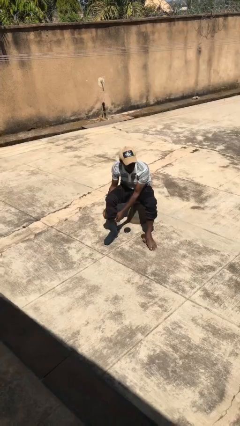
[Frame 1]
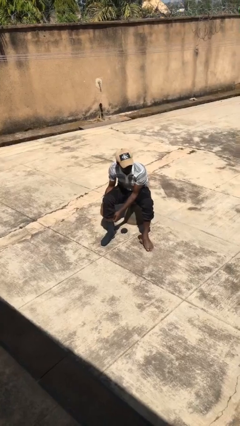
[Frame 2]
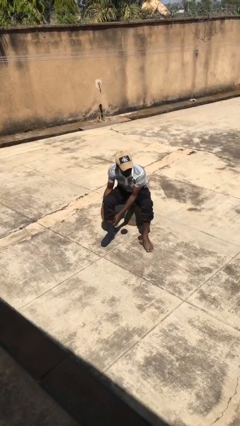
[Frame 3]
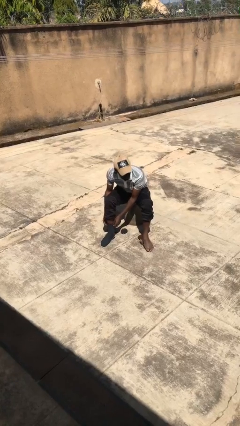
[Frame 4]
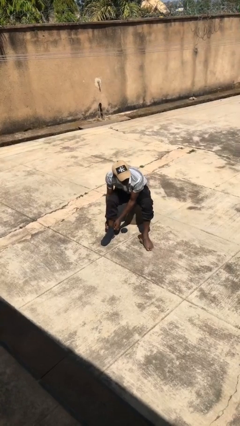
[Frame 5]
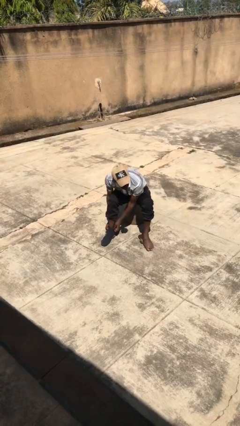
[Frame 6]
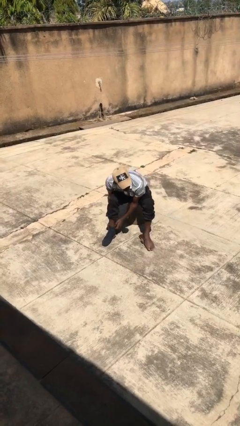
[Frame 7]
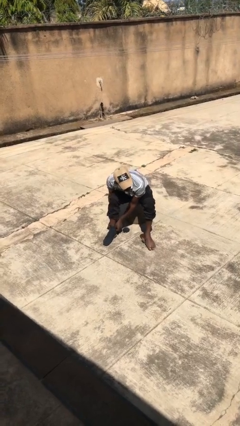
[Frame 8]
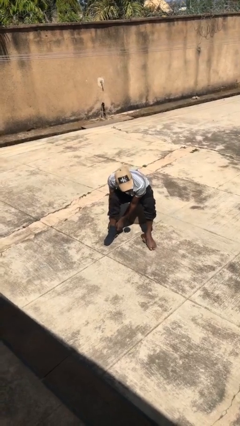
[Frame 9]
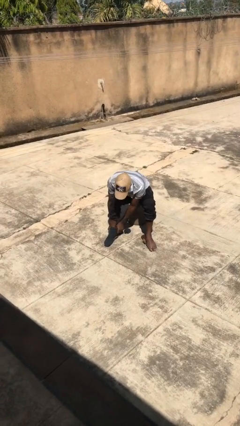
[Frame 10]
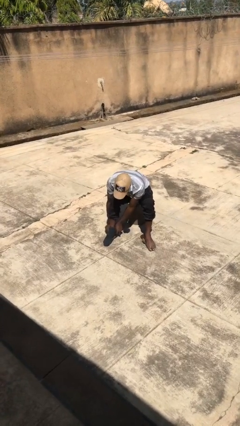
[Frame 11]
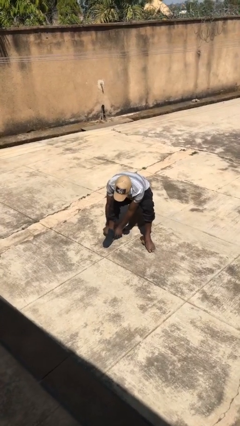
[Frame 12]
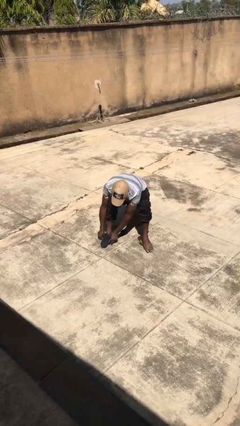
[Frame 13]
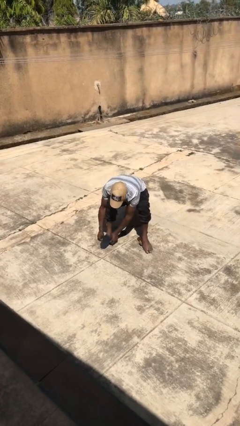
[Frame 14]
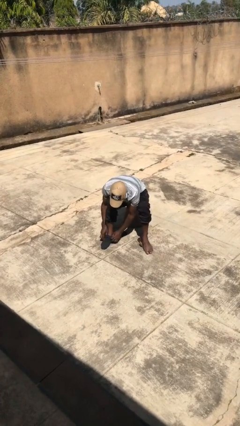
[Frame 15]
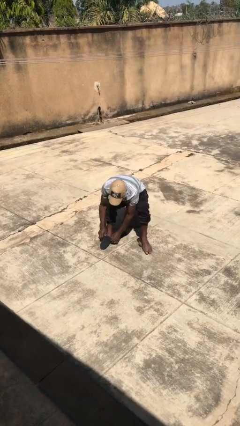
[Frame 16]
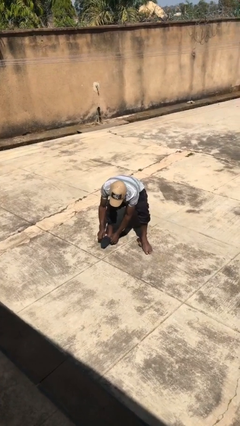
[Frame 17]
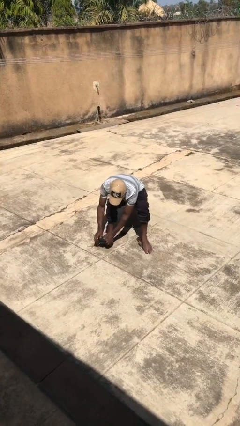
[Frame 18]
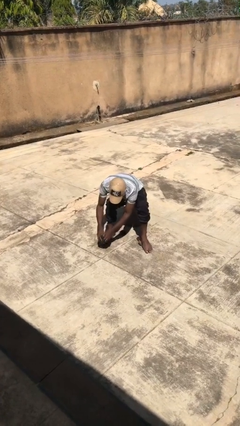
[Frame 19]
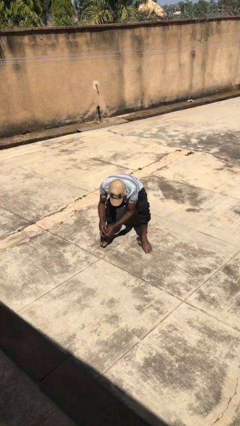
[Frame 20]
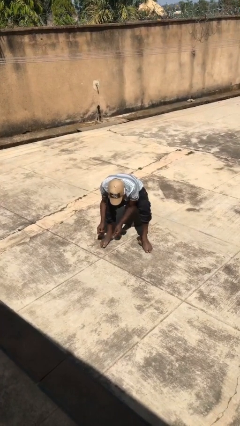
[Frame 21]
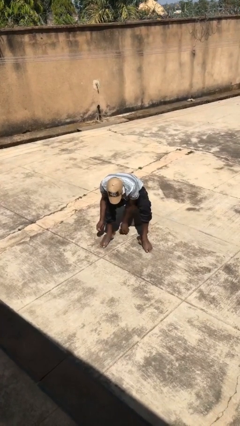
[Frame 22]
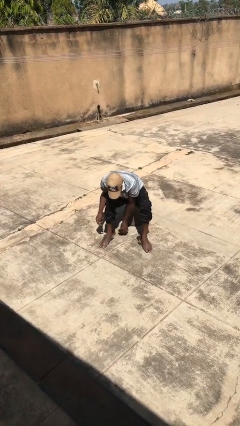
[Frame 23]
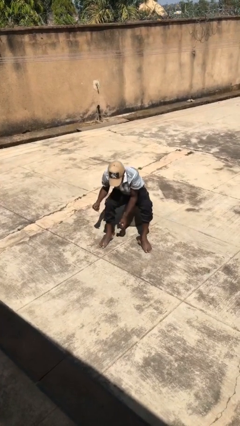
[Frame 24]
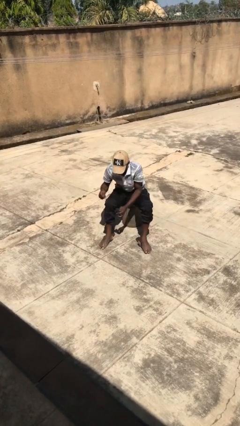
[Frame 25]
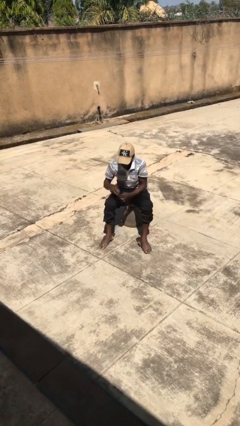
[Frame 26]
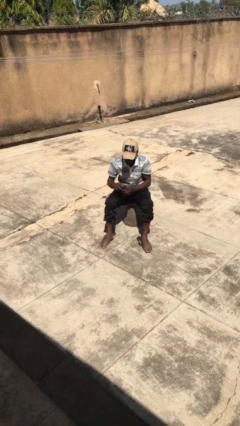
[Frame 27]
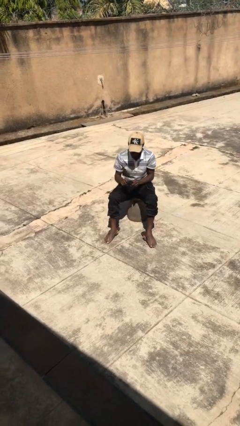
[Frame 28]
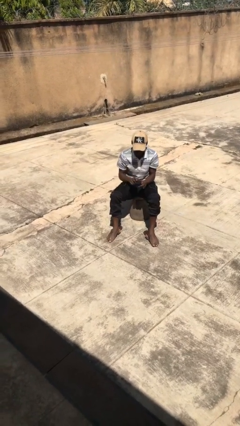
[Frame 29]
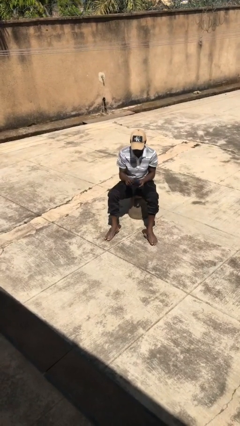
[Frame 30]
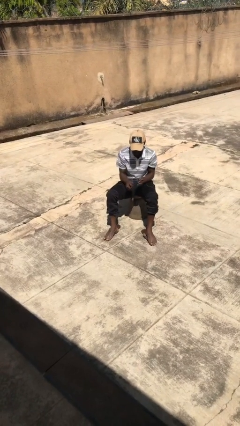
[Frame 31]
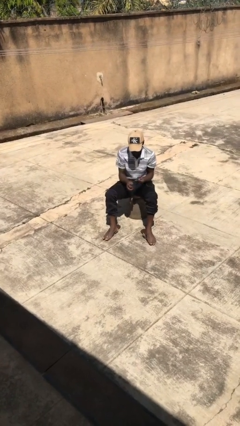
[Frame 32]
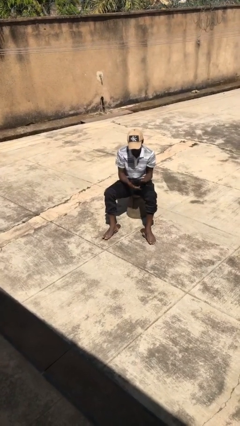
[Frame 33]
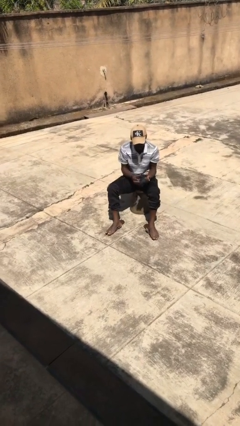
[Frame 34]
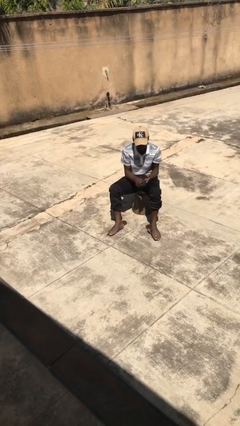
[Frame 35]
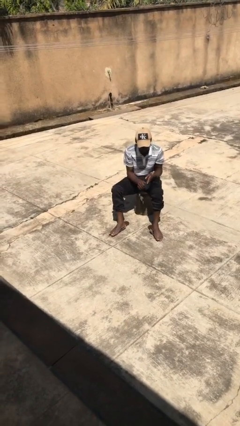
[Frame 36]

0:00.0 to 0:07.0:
person takes off socks

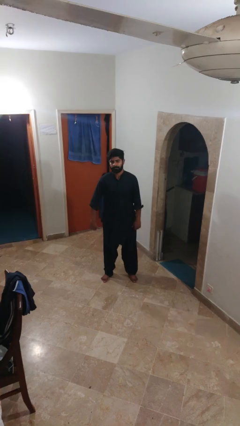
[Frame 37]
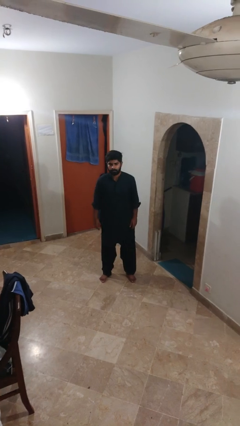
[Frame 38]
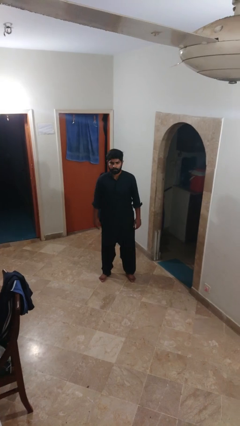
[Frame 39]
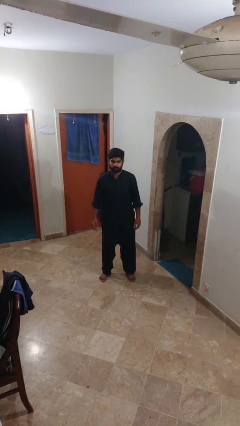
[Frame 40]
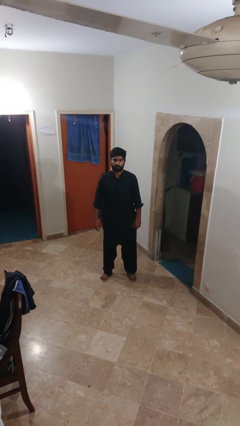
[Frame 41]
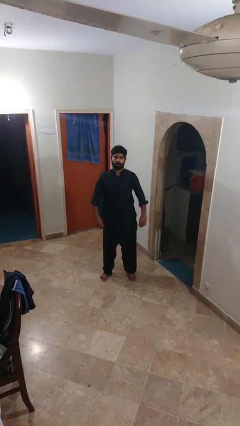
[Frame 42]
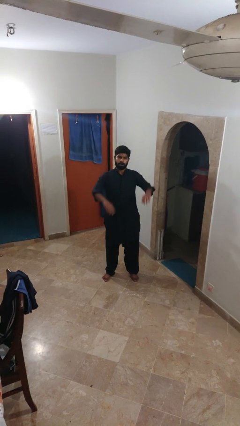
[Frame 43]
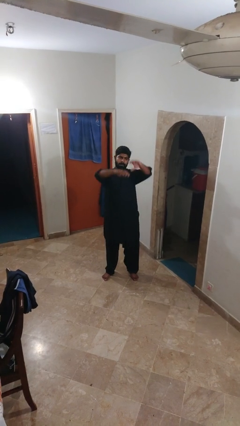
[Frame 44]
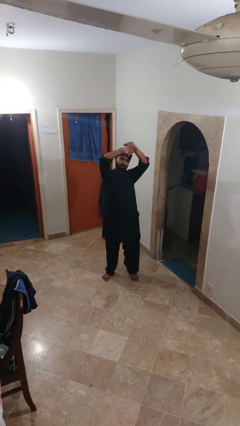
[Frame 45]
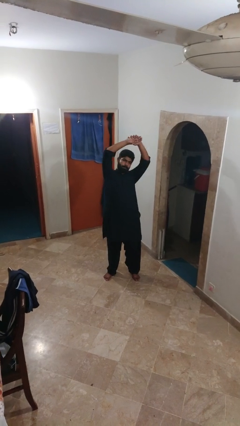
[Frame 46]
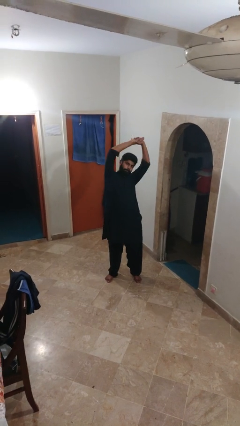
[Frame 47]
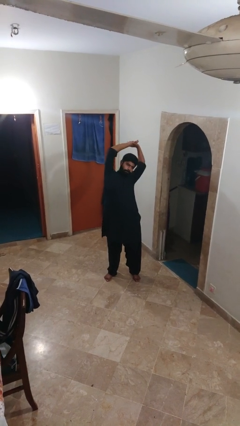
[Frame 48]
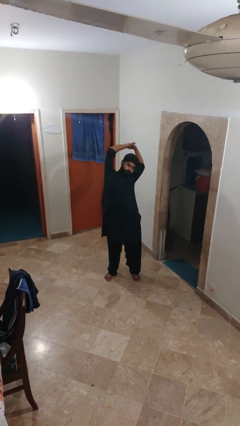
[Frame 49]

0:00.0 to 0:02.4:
person stretches arms over head

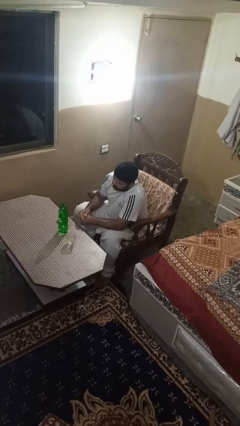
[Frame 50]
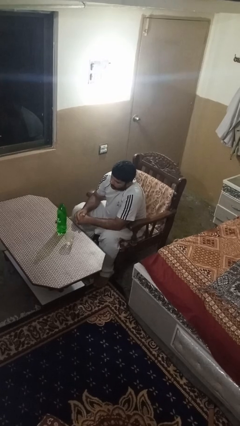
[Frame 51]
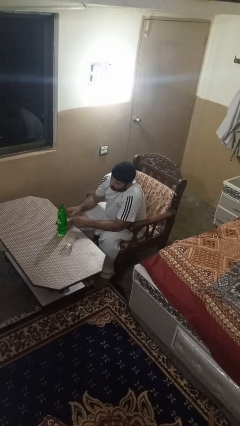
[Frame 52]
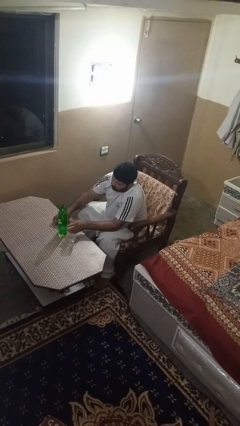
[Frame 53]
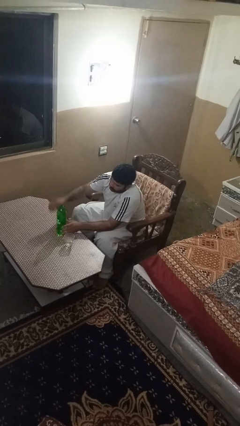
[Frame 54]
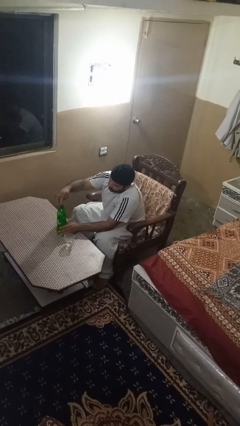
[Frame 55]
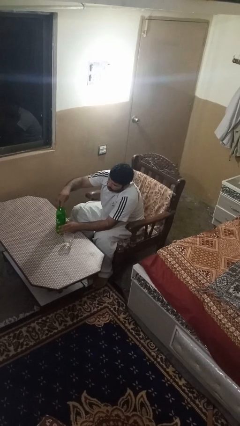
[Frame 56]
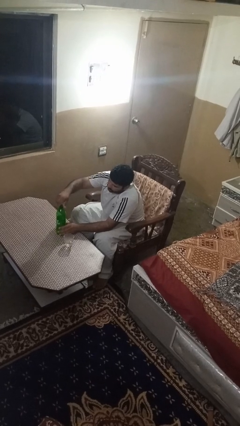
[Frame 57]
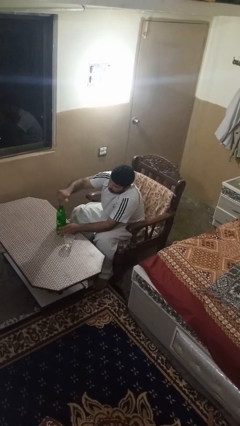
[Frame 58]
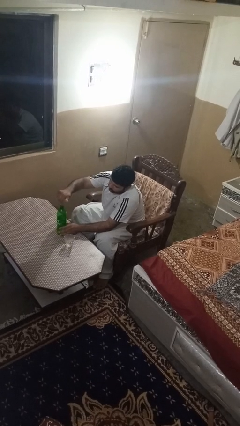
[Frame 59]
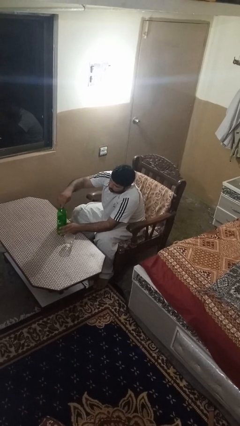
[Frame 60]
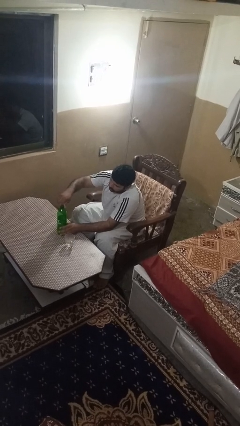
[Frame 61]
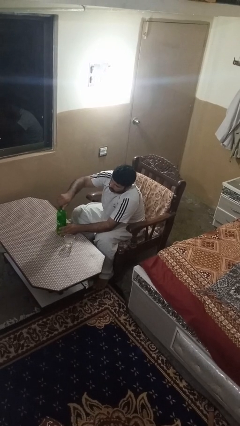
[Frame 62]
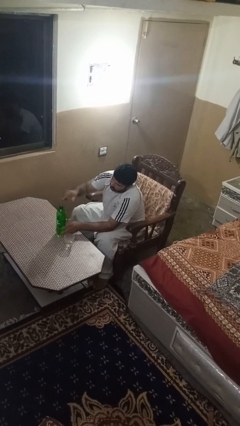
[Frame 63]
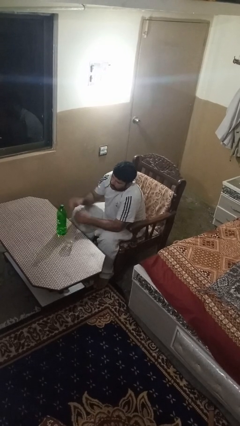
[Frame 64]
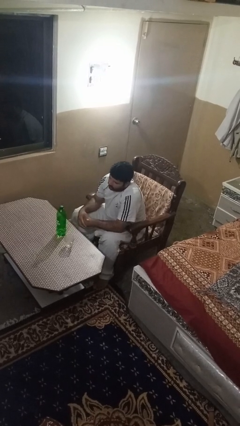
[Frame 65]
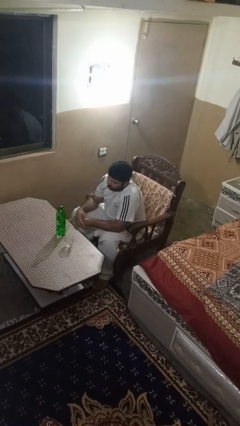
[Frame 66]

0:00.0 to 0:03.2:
person screws lid to bottle

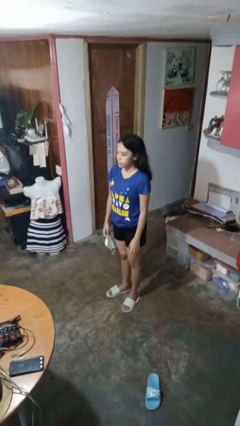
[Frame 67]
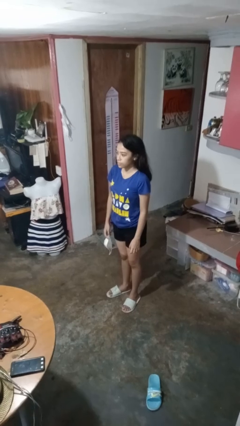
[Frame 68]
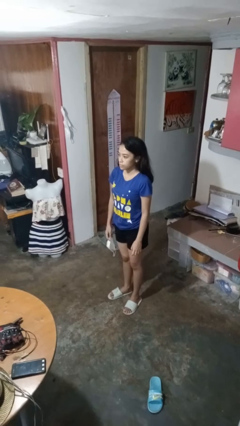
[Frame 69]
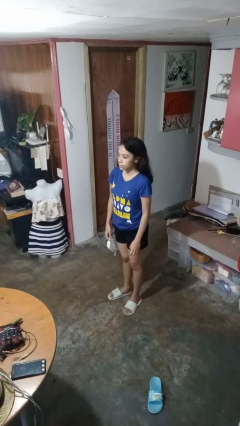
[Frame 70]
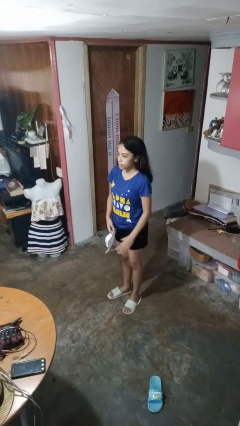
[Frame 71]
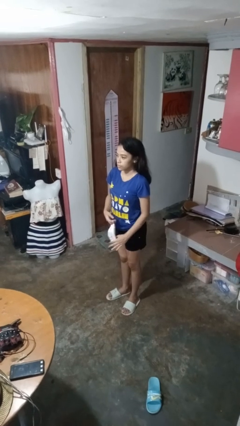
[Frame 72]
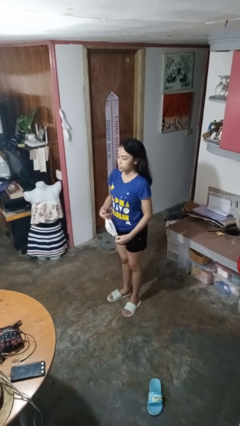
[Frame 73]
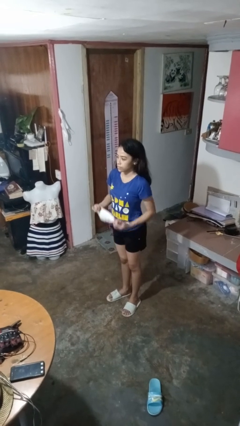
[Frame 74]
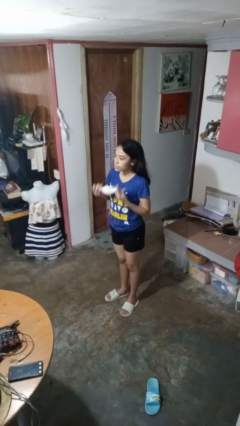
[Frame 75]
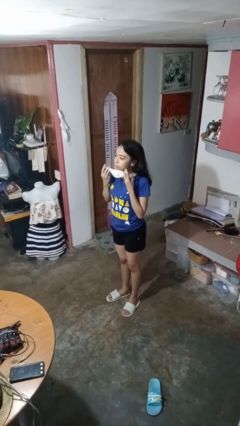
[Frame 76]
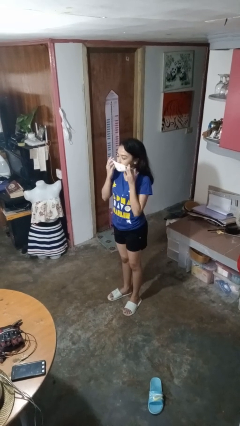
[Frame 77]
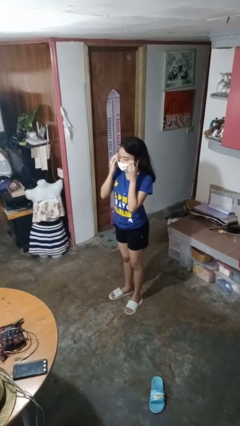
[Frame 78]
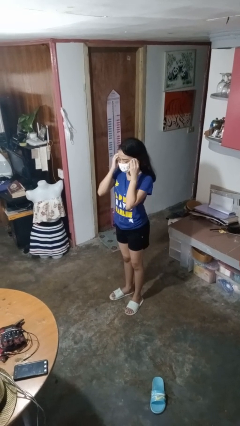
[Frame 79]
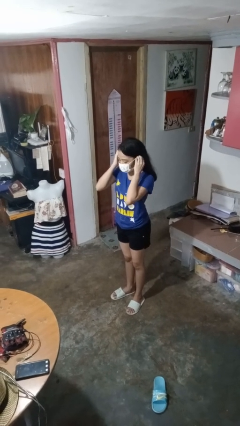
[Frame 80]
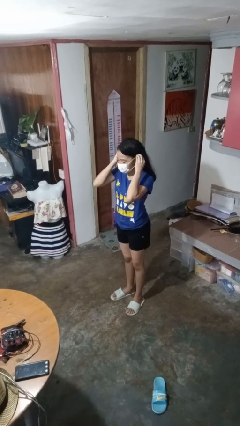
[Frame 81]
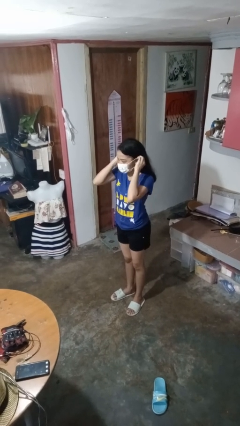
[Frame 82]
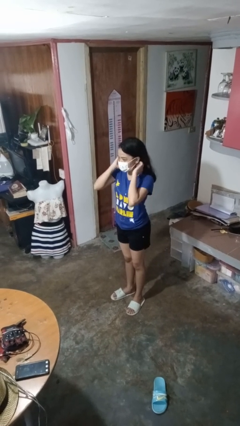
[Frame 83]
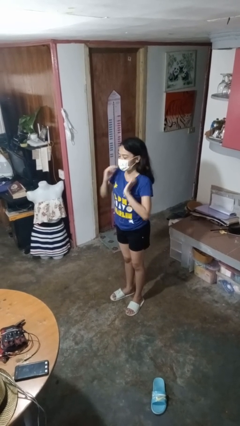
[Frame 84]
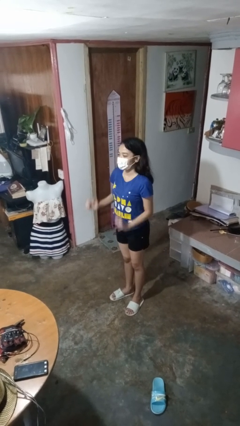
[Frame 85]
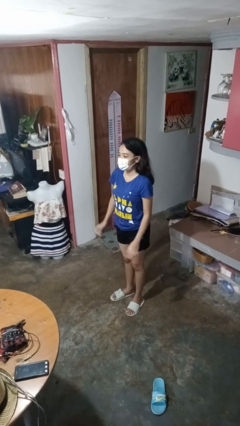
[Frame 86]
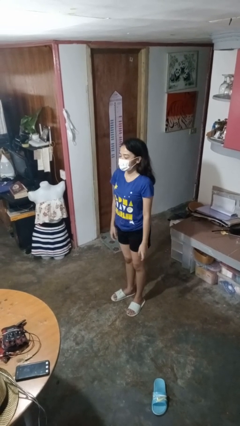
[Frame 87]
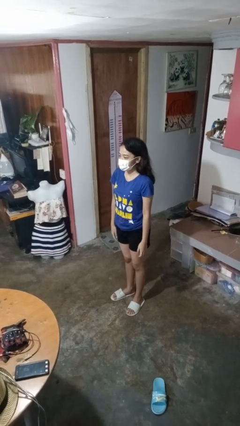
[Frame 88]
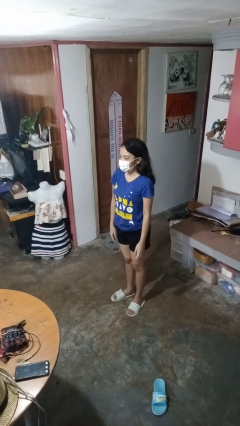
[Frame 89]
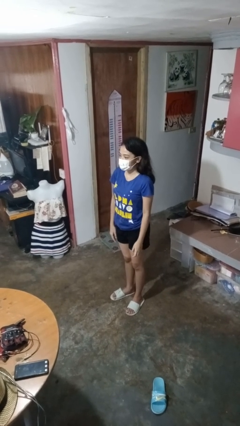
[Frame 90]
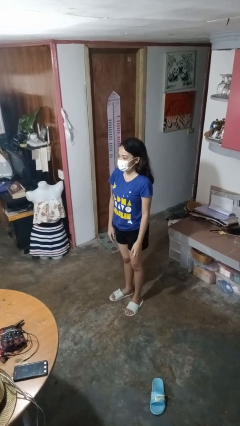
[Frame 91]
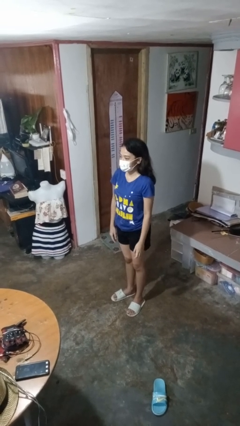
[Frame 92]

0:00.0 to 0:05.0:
person puts on facemask
